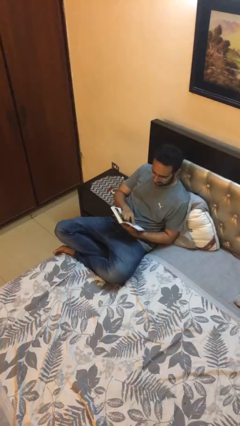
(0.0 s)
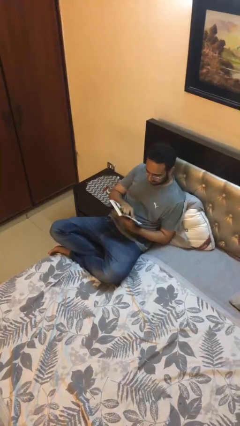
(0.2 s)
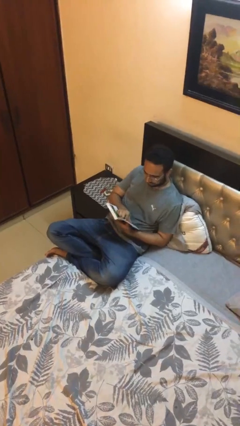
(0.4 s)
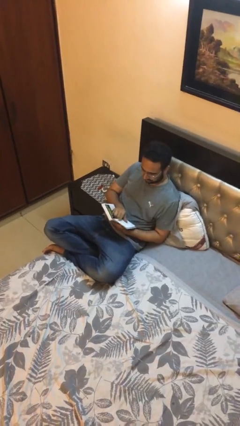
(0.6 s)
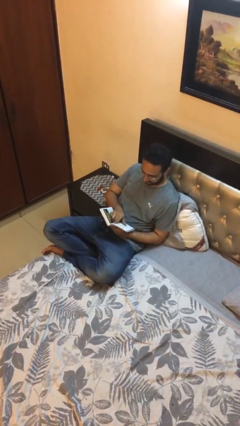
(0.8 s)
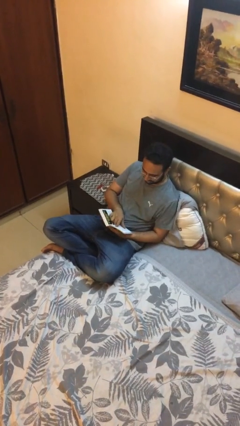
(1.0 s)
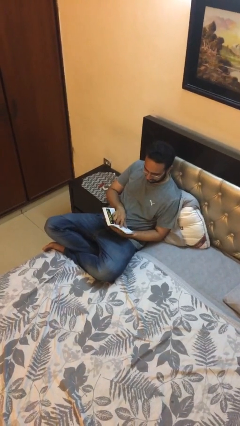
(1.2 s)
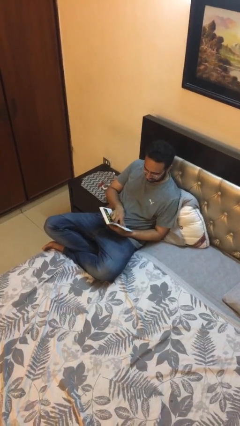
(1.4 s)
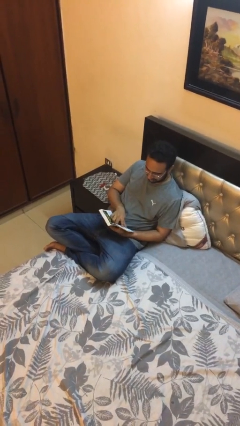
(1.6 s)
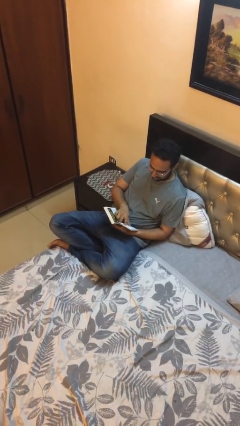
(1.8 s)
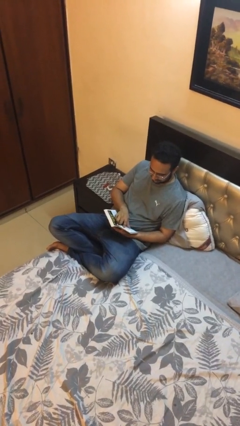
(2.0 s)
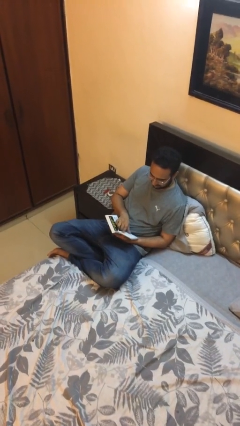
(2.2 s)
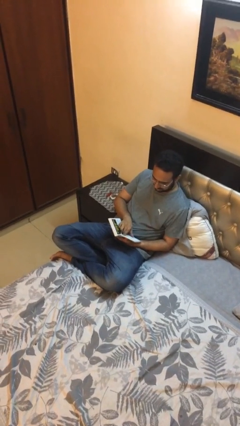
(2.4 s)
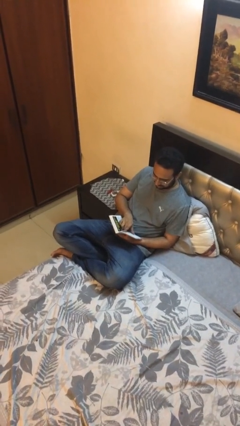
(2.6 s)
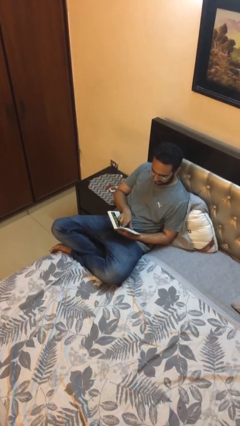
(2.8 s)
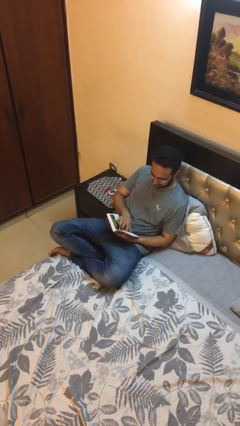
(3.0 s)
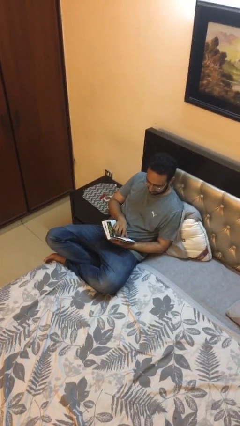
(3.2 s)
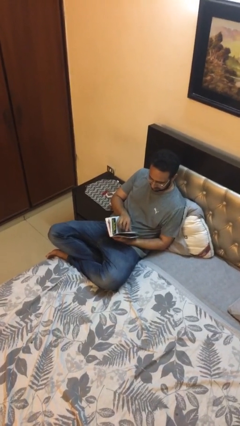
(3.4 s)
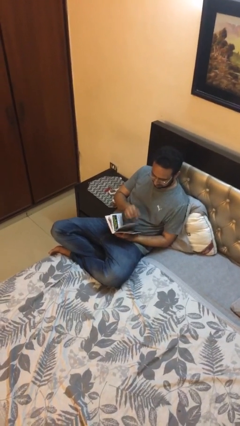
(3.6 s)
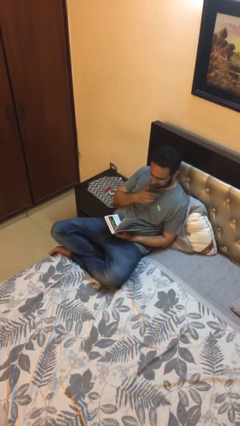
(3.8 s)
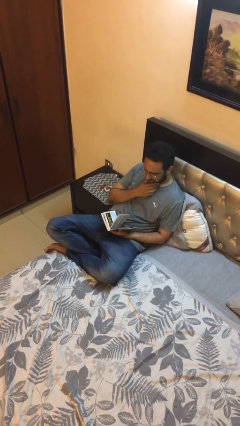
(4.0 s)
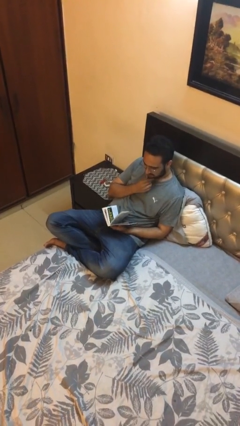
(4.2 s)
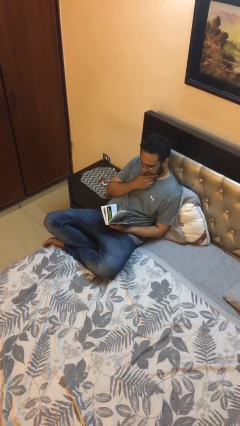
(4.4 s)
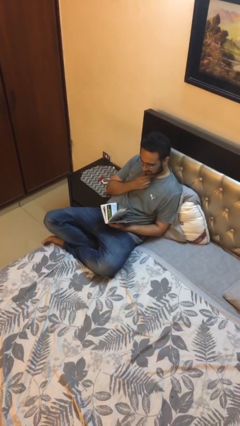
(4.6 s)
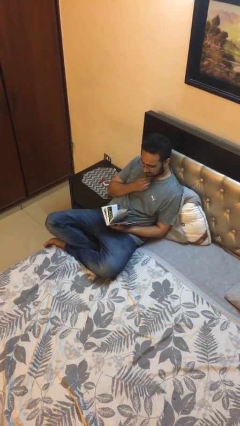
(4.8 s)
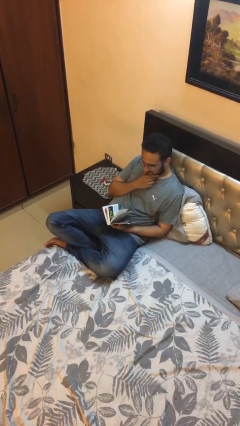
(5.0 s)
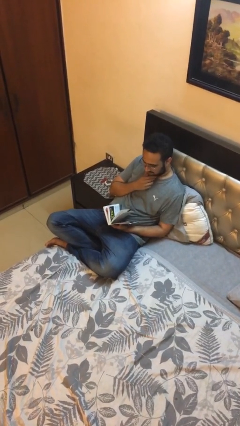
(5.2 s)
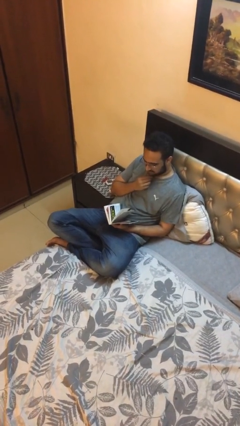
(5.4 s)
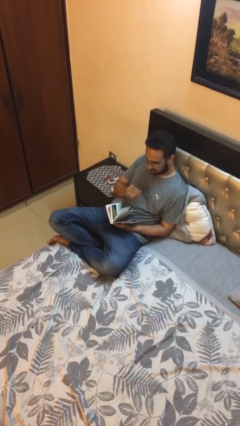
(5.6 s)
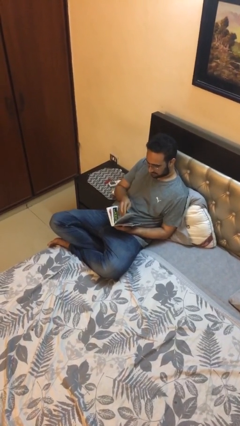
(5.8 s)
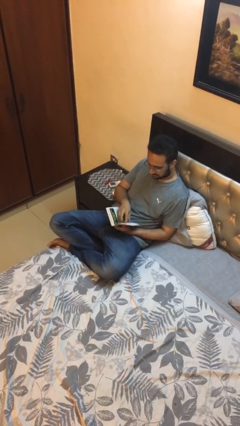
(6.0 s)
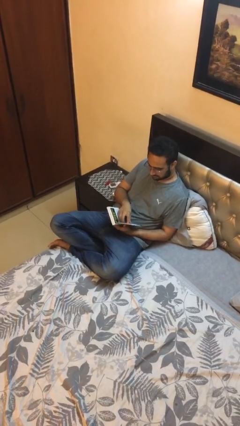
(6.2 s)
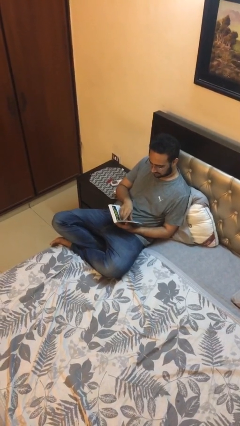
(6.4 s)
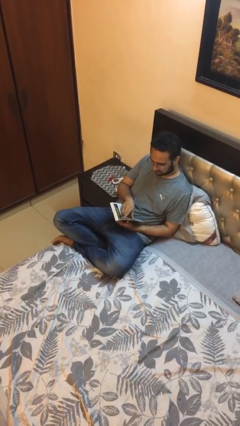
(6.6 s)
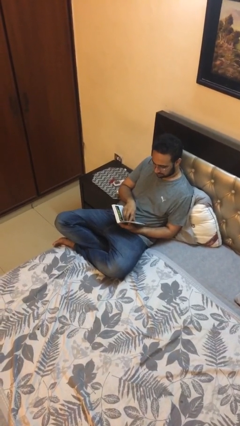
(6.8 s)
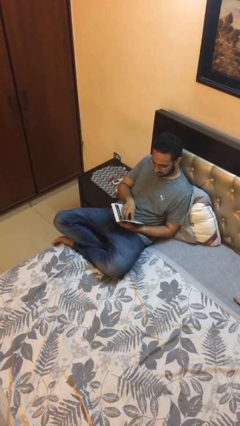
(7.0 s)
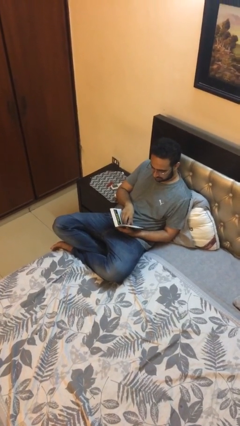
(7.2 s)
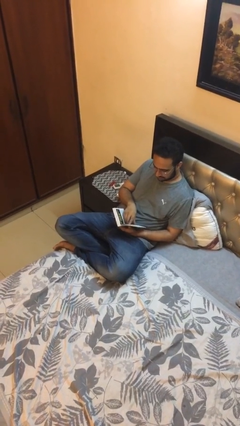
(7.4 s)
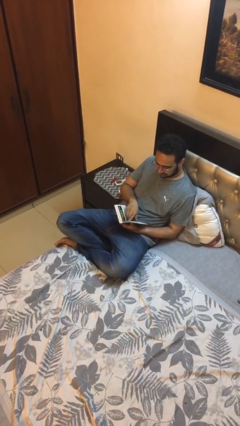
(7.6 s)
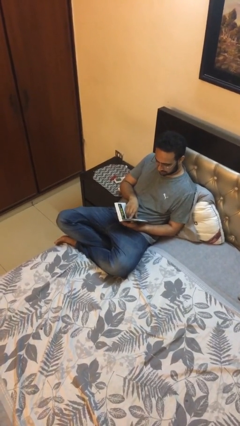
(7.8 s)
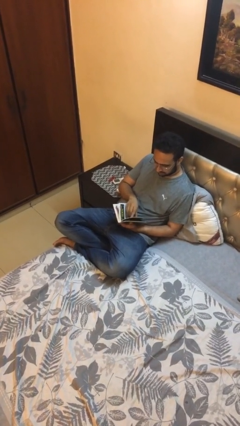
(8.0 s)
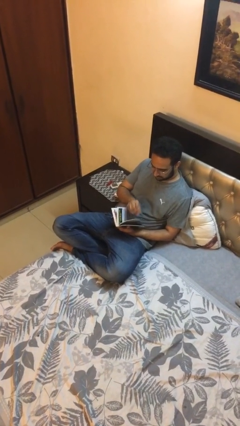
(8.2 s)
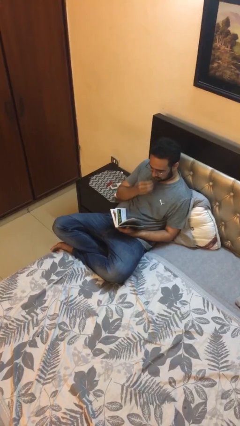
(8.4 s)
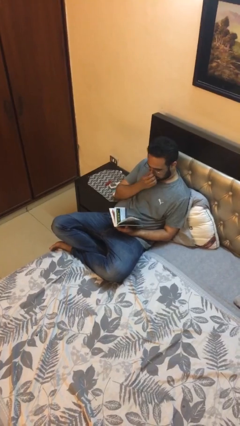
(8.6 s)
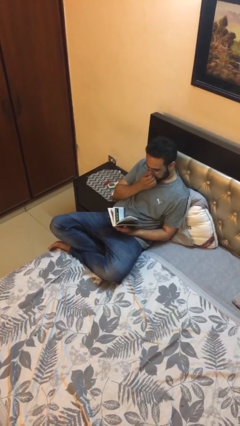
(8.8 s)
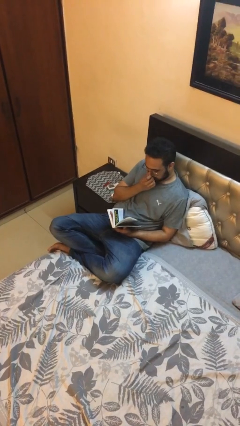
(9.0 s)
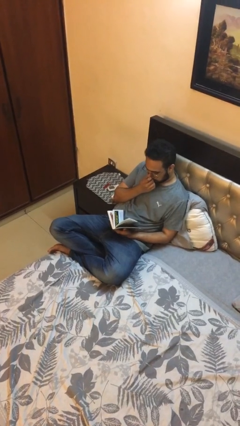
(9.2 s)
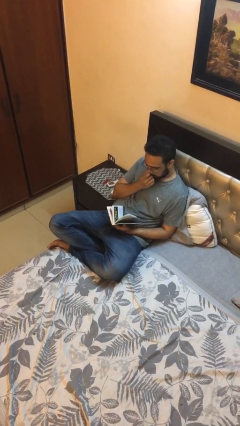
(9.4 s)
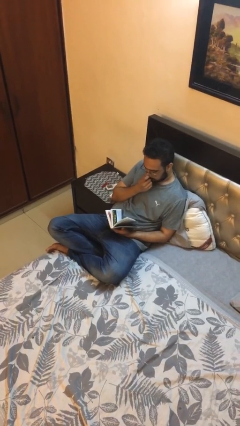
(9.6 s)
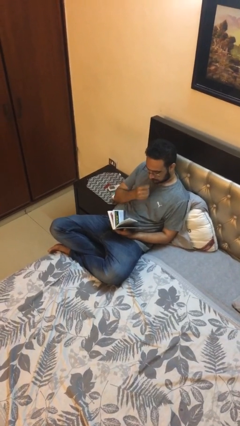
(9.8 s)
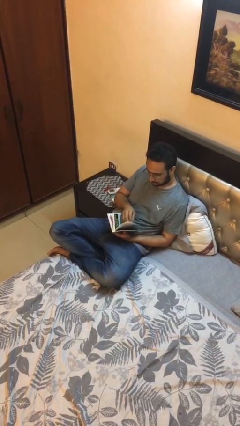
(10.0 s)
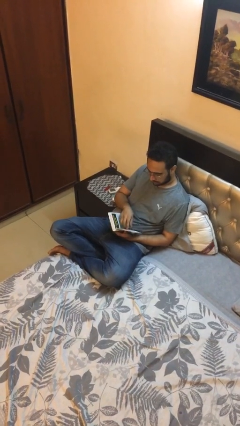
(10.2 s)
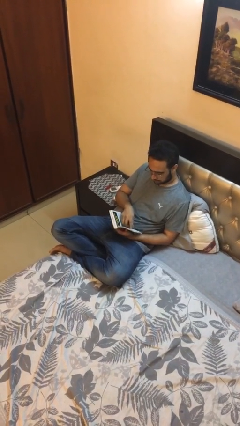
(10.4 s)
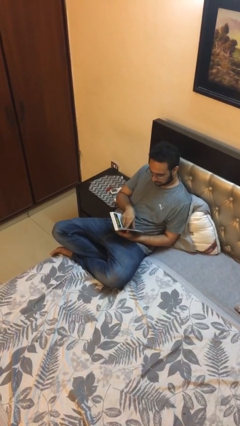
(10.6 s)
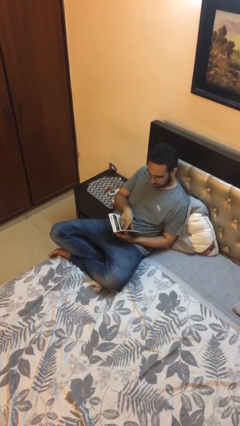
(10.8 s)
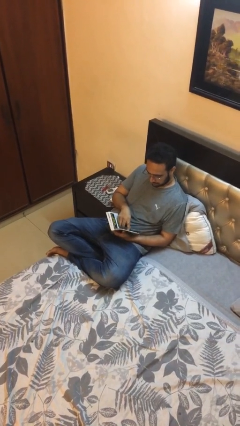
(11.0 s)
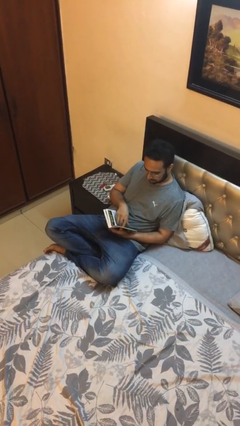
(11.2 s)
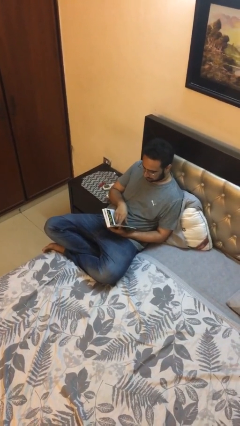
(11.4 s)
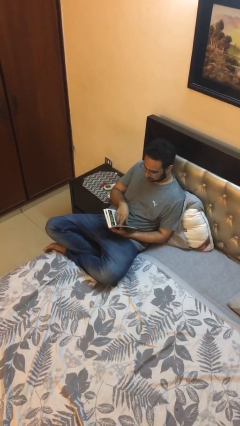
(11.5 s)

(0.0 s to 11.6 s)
person reads document

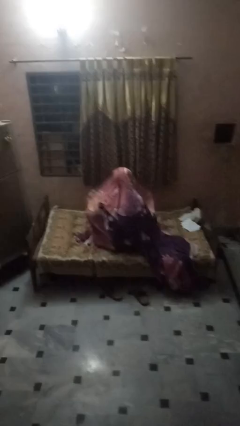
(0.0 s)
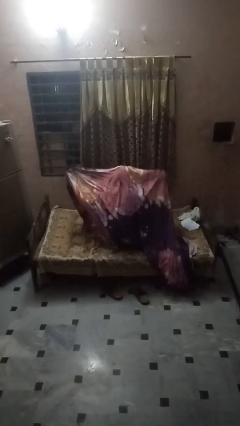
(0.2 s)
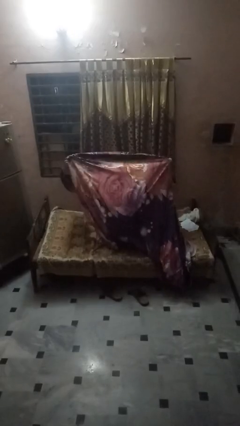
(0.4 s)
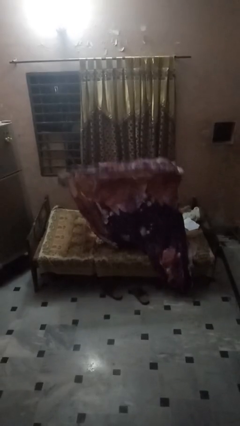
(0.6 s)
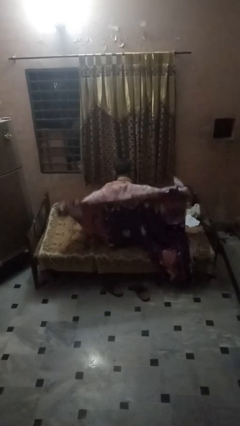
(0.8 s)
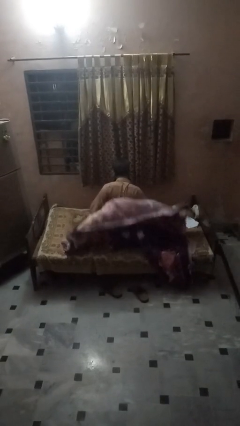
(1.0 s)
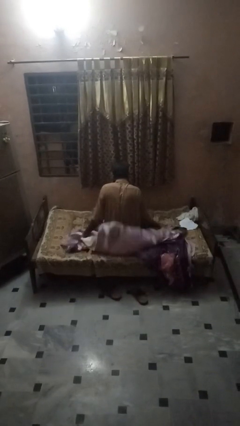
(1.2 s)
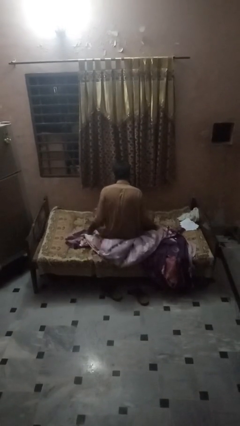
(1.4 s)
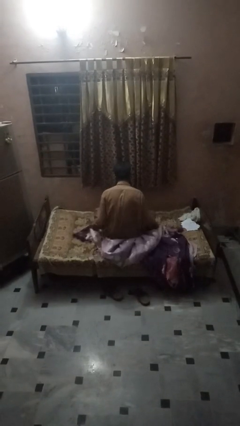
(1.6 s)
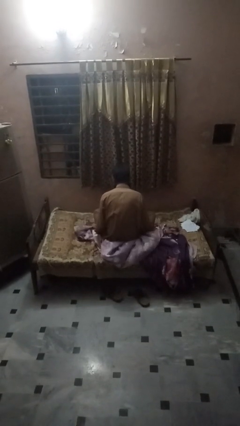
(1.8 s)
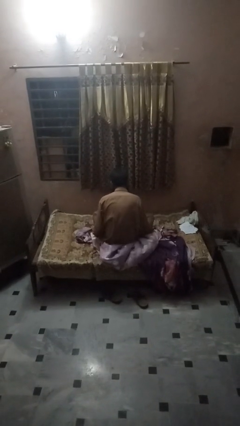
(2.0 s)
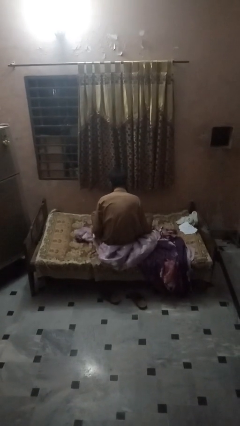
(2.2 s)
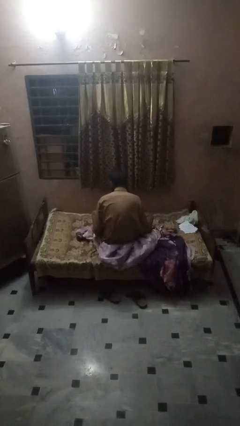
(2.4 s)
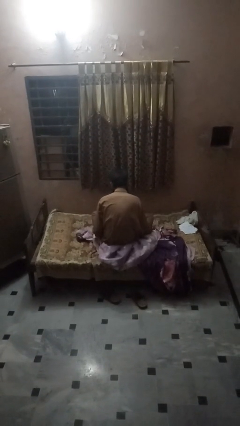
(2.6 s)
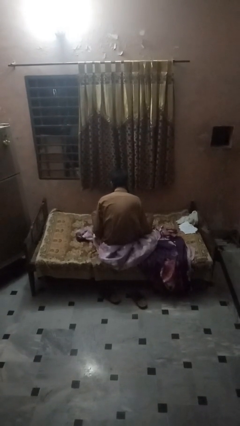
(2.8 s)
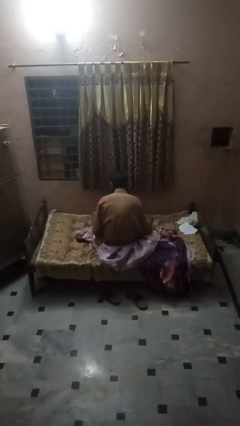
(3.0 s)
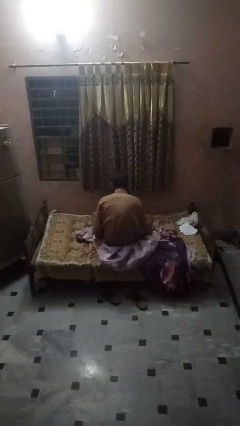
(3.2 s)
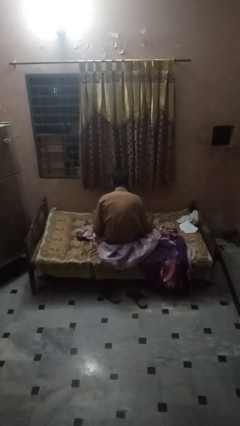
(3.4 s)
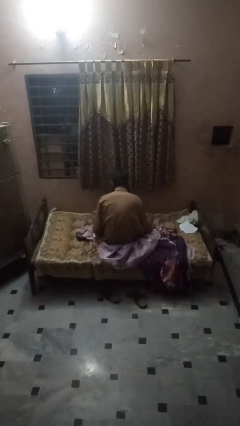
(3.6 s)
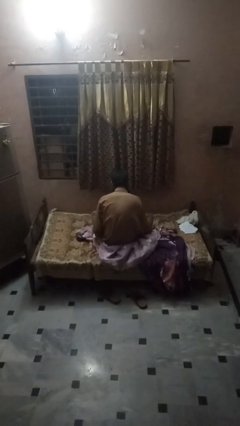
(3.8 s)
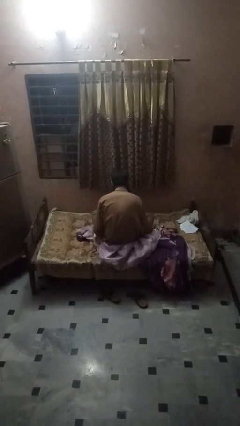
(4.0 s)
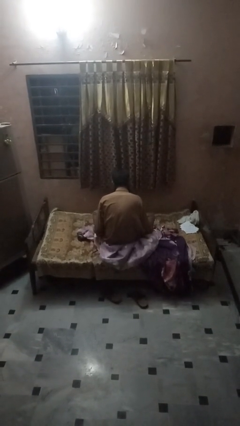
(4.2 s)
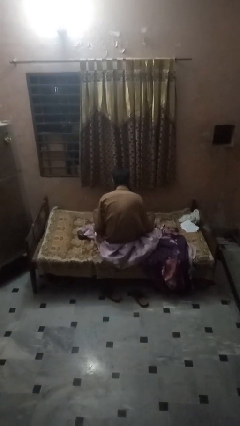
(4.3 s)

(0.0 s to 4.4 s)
person uncovers with bedsheets

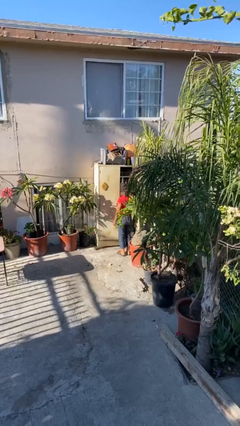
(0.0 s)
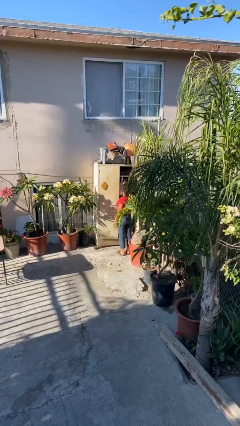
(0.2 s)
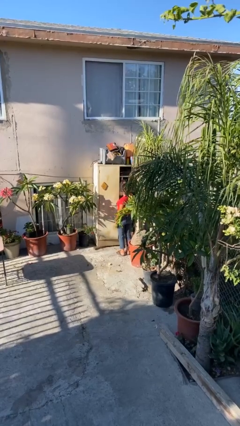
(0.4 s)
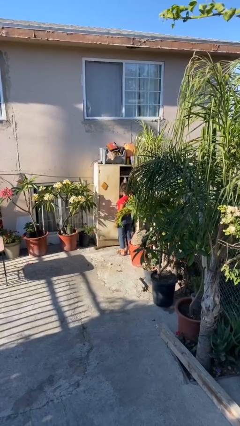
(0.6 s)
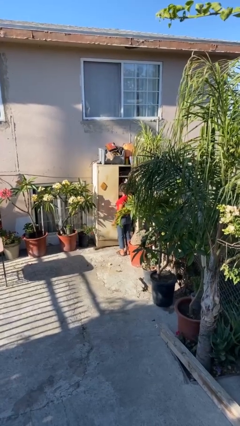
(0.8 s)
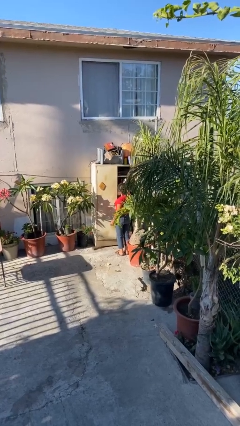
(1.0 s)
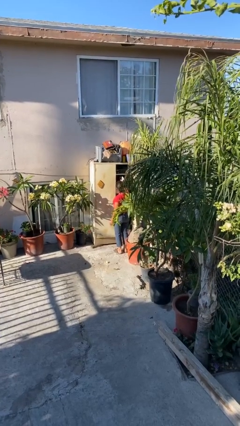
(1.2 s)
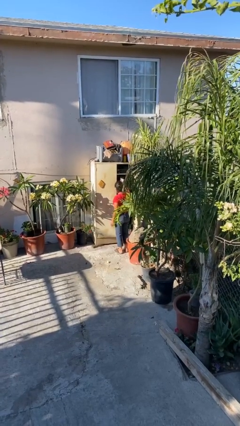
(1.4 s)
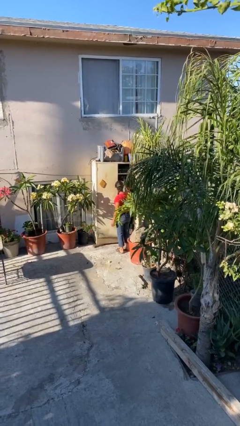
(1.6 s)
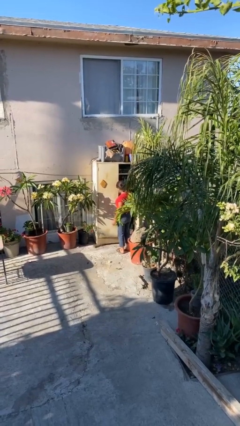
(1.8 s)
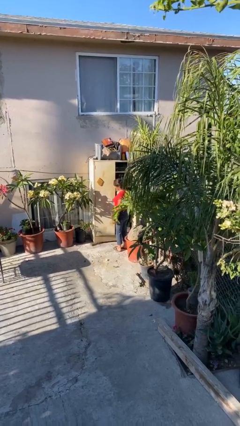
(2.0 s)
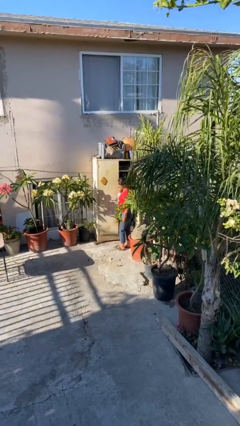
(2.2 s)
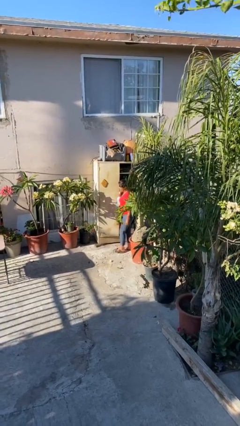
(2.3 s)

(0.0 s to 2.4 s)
person picks up object from shelf

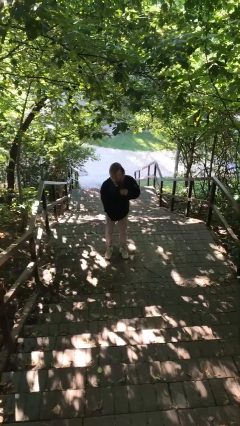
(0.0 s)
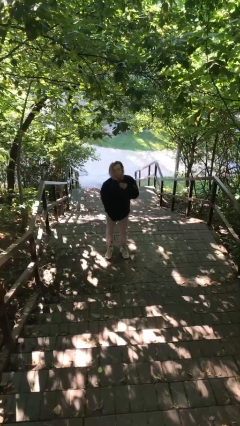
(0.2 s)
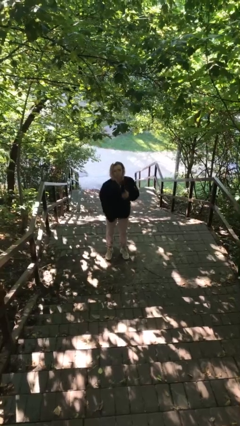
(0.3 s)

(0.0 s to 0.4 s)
person zips up jacket
